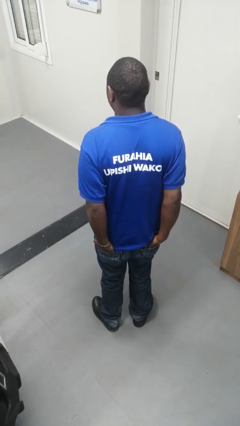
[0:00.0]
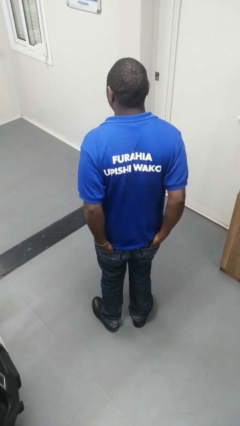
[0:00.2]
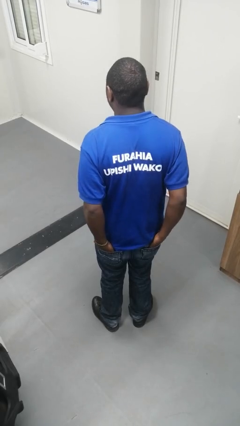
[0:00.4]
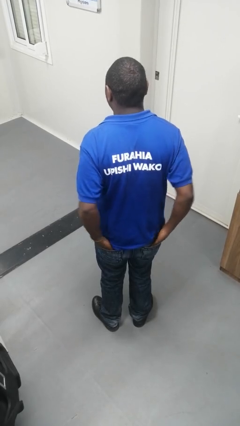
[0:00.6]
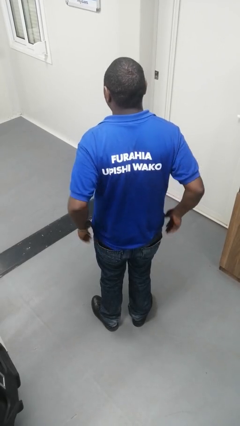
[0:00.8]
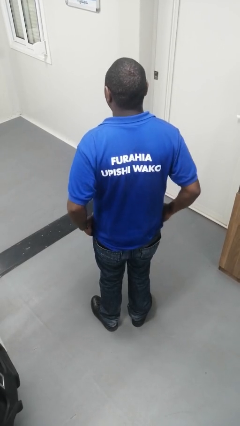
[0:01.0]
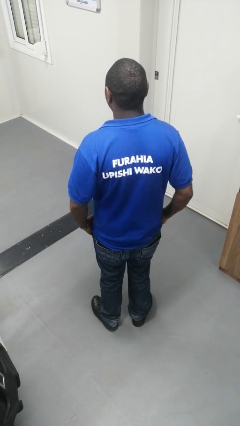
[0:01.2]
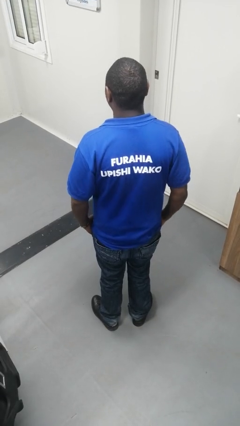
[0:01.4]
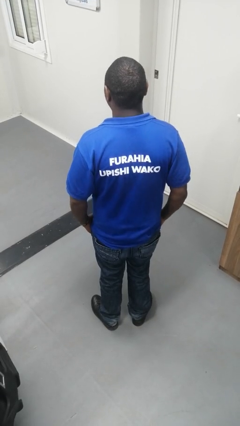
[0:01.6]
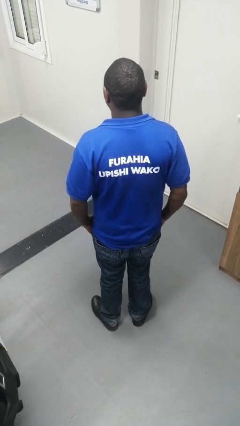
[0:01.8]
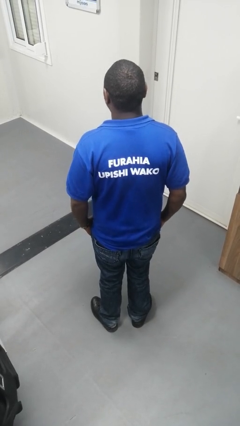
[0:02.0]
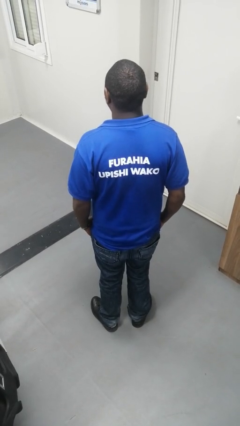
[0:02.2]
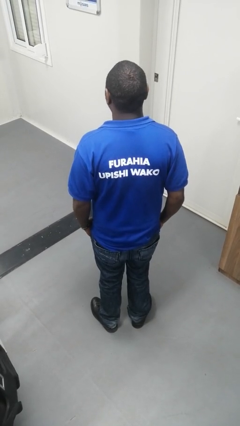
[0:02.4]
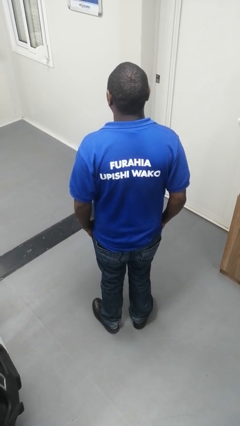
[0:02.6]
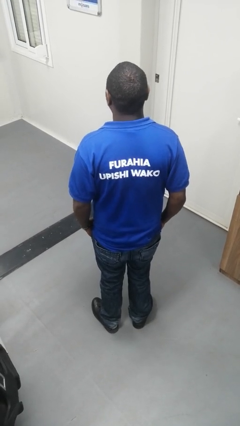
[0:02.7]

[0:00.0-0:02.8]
person puts hands in back pockets

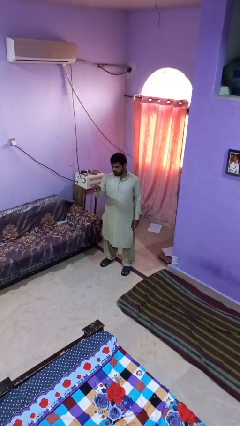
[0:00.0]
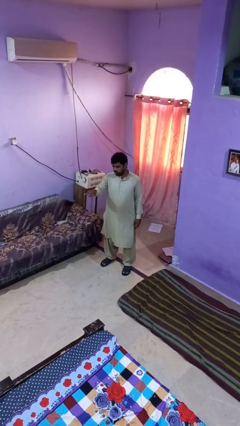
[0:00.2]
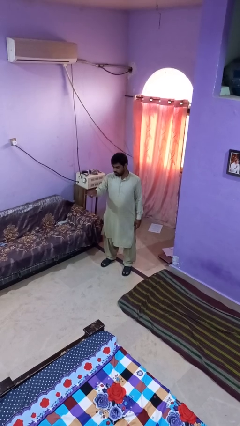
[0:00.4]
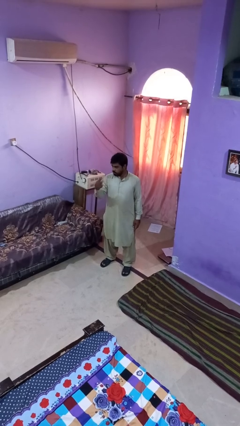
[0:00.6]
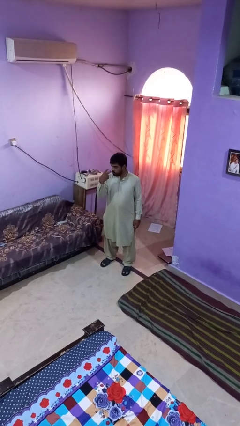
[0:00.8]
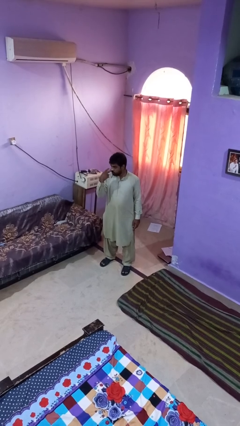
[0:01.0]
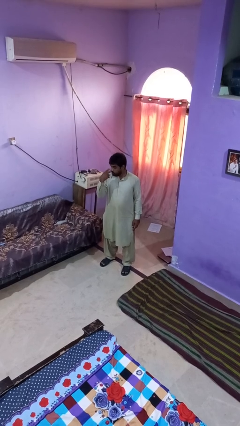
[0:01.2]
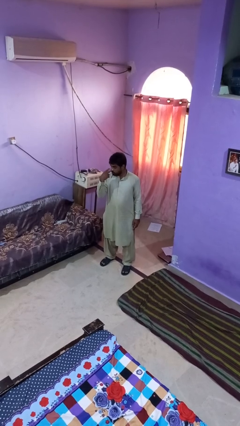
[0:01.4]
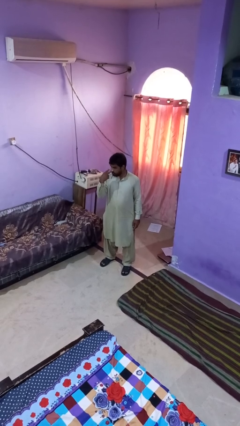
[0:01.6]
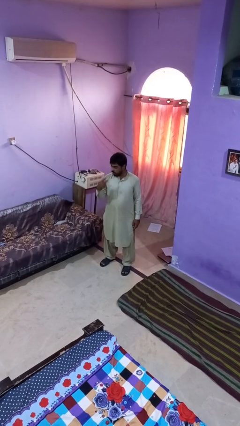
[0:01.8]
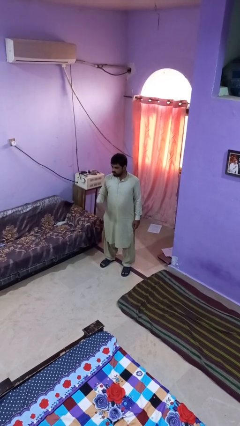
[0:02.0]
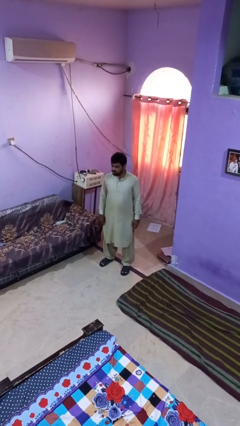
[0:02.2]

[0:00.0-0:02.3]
person gestures watch closely

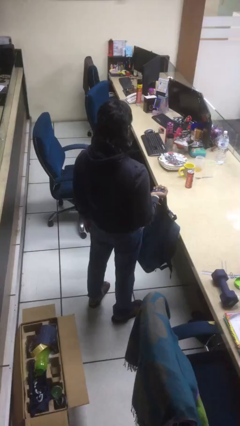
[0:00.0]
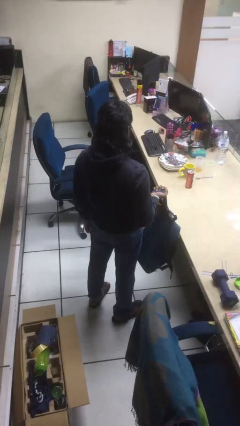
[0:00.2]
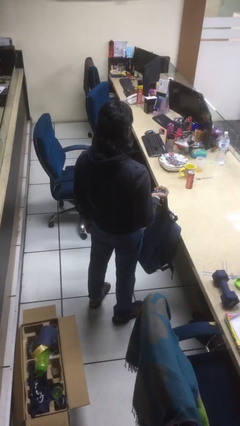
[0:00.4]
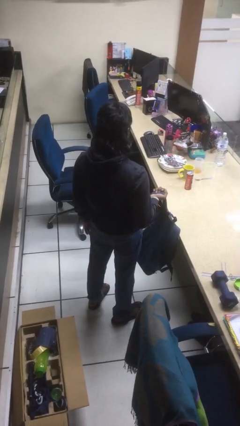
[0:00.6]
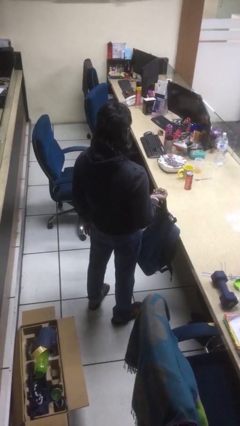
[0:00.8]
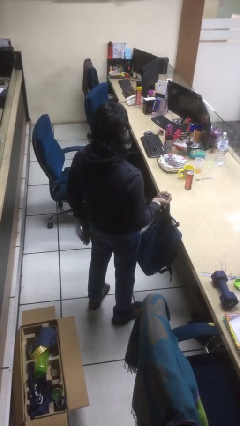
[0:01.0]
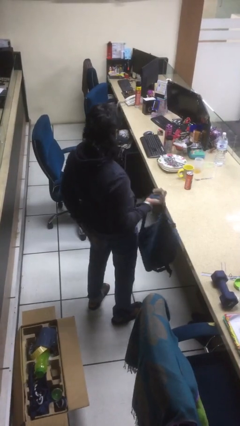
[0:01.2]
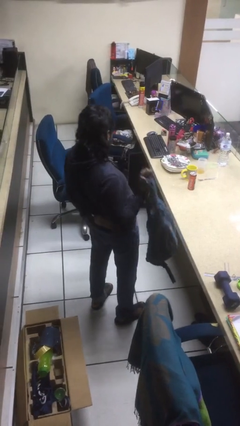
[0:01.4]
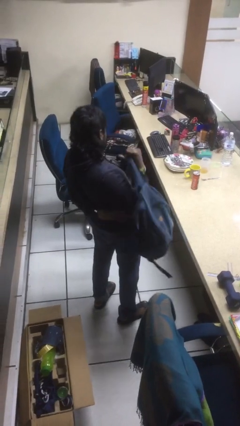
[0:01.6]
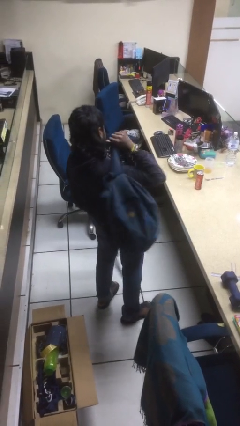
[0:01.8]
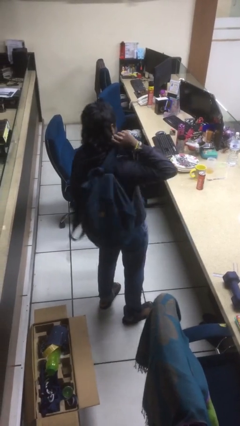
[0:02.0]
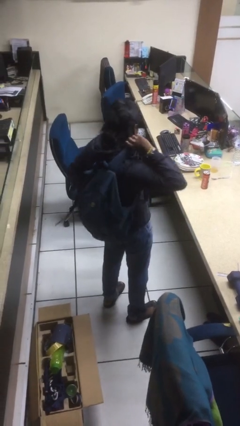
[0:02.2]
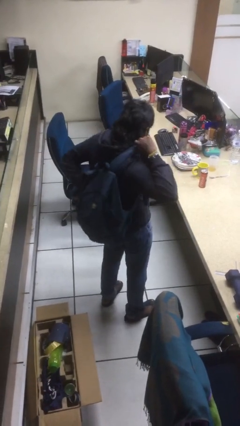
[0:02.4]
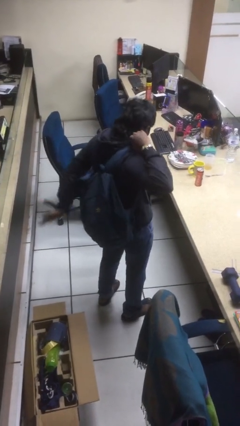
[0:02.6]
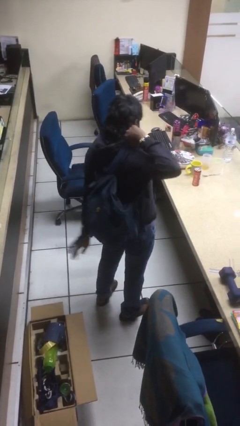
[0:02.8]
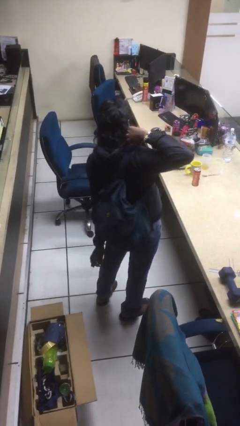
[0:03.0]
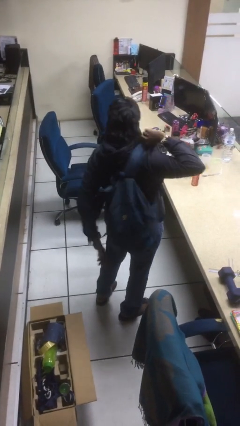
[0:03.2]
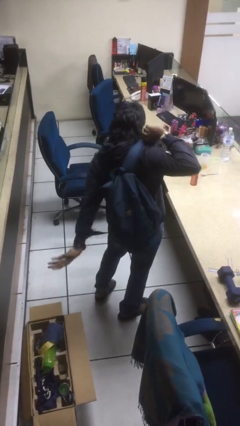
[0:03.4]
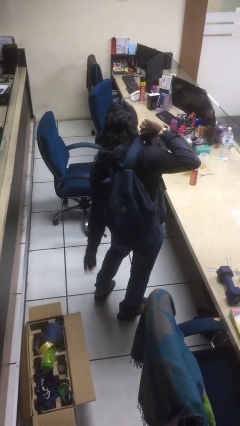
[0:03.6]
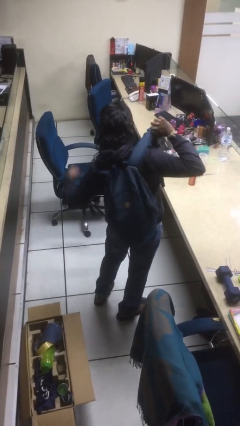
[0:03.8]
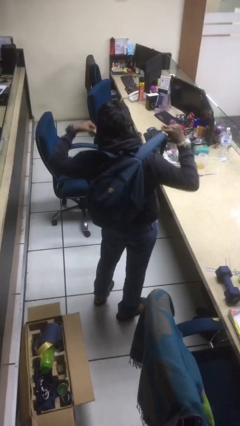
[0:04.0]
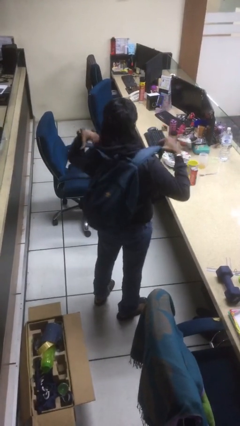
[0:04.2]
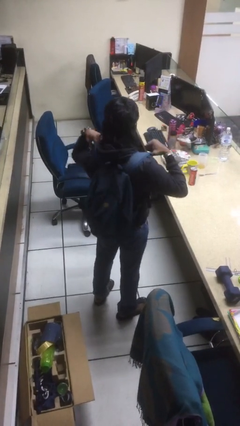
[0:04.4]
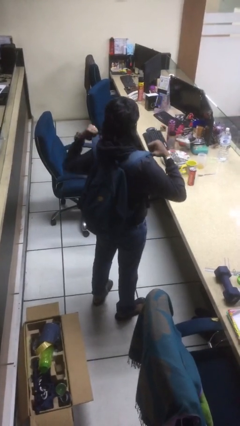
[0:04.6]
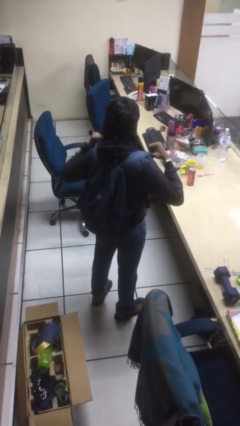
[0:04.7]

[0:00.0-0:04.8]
person puts on backpack

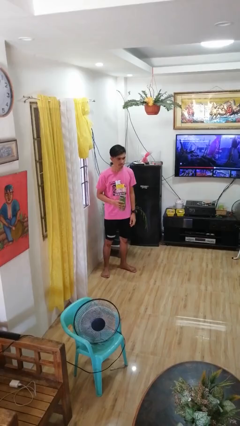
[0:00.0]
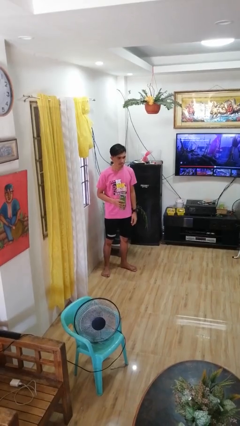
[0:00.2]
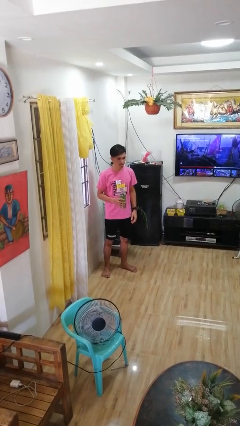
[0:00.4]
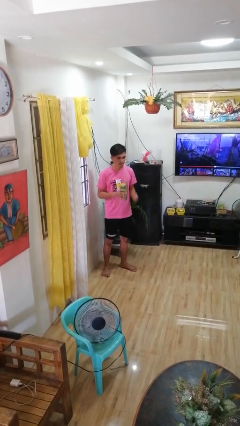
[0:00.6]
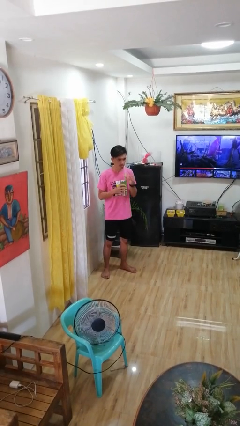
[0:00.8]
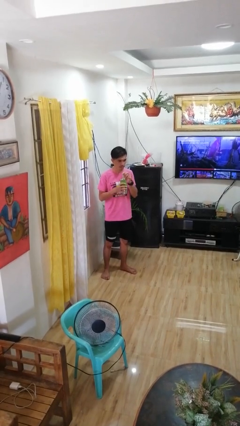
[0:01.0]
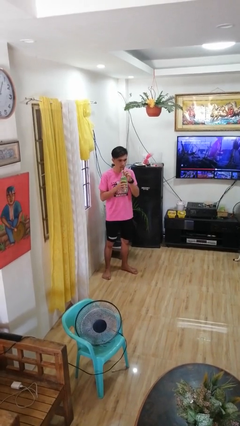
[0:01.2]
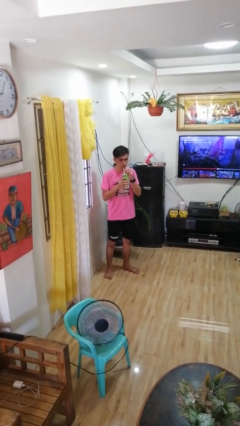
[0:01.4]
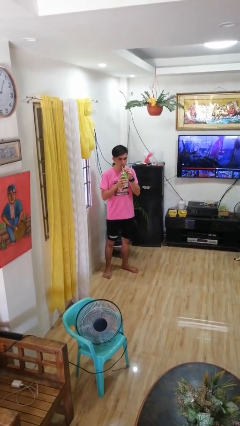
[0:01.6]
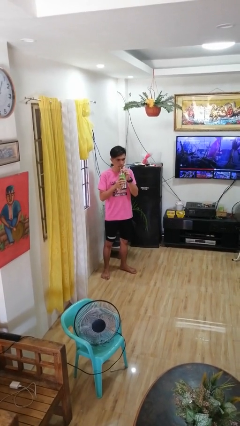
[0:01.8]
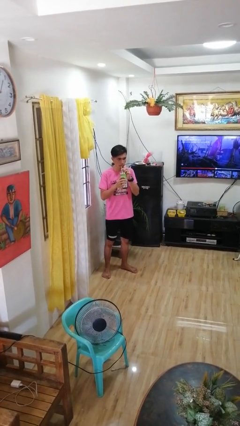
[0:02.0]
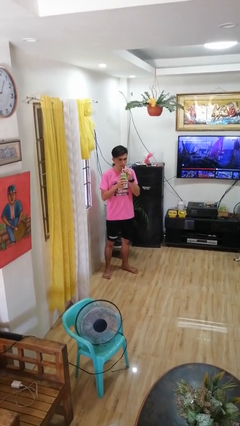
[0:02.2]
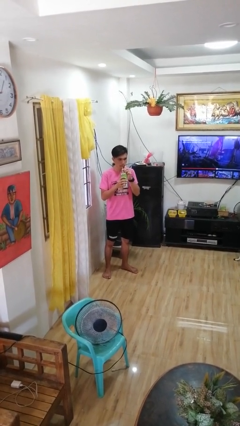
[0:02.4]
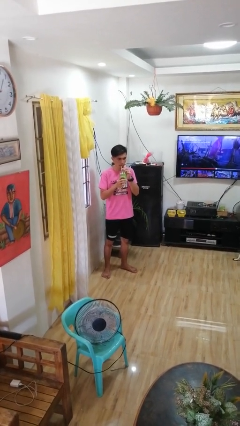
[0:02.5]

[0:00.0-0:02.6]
person drinks from straw

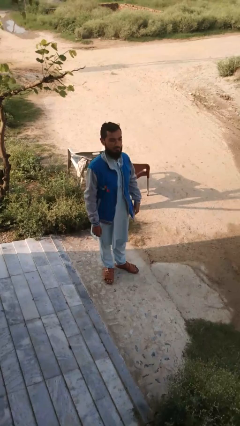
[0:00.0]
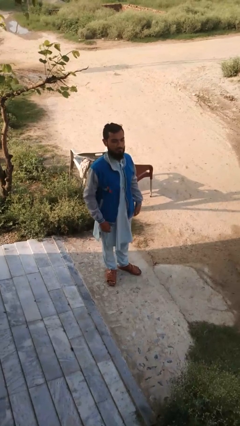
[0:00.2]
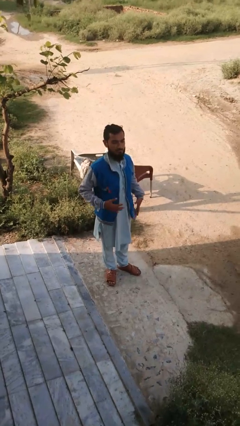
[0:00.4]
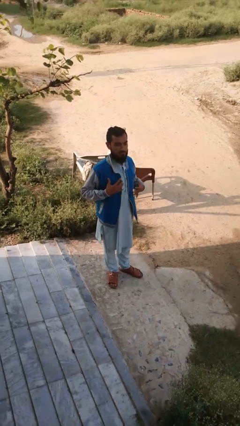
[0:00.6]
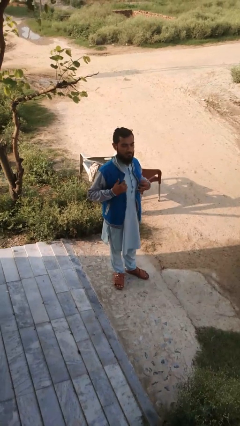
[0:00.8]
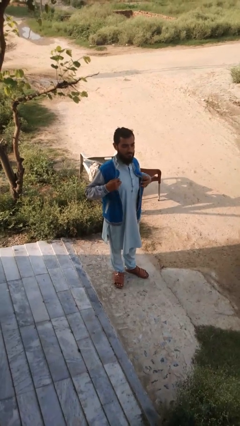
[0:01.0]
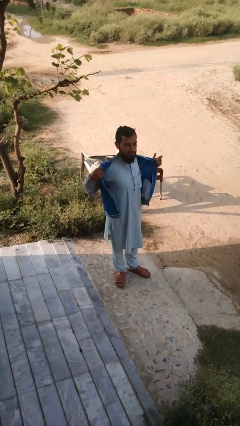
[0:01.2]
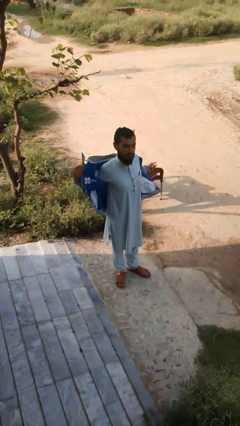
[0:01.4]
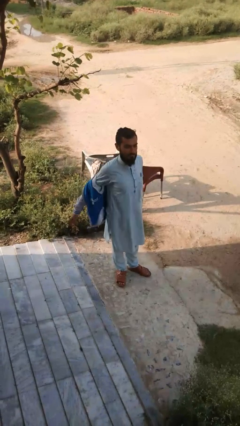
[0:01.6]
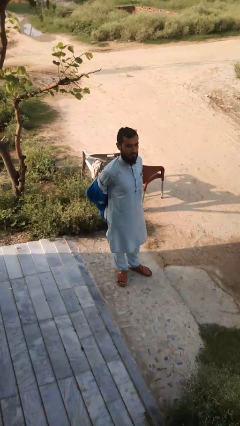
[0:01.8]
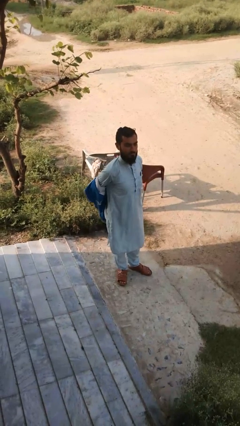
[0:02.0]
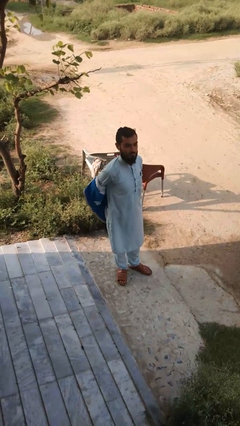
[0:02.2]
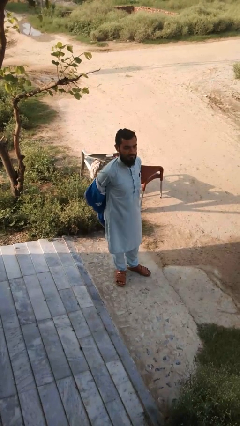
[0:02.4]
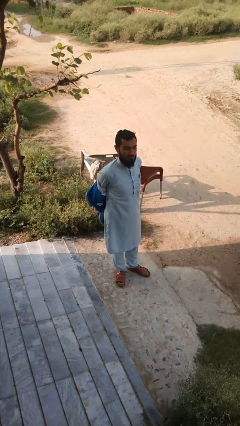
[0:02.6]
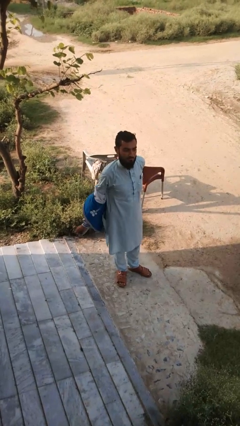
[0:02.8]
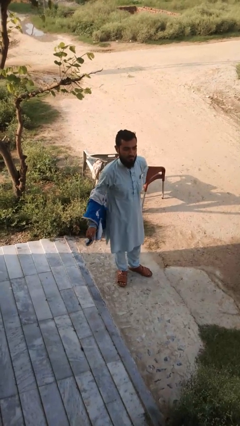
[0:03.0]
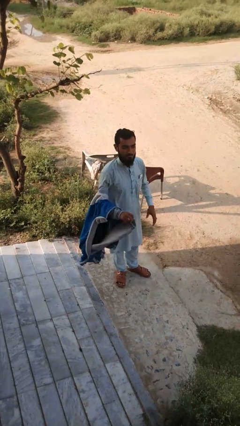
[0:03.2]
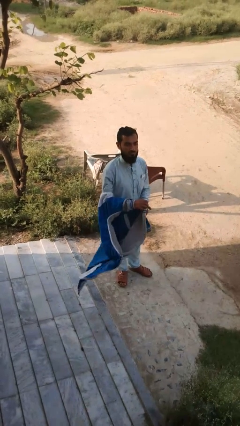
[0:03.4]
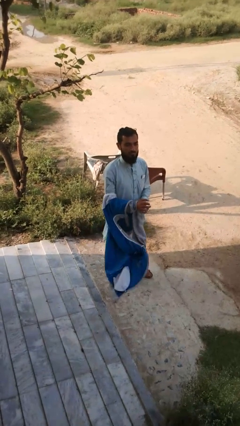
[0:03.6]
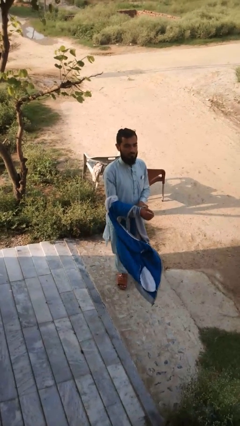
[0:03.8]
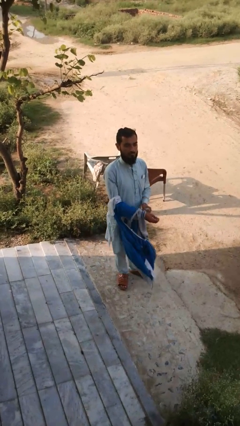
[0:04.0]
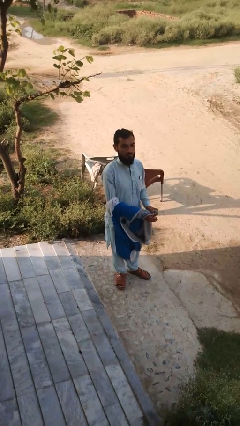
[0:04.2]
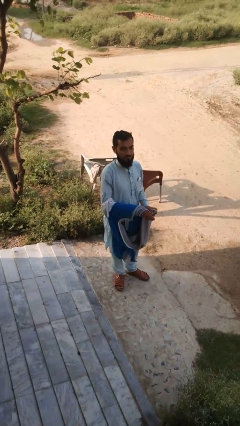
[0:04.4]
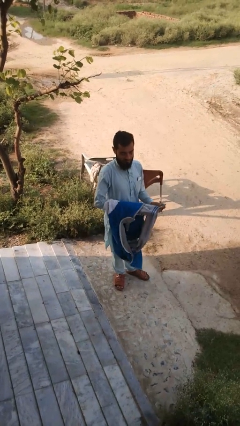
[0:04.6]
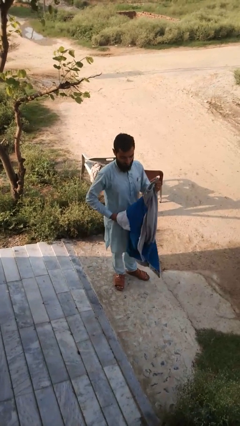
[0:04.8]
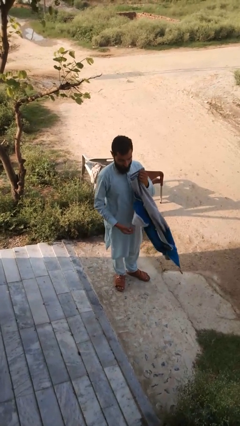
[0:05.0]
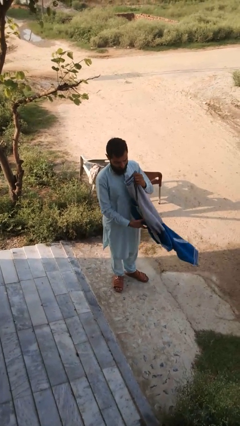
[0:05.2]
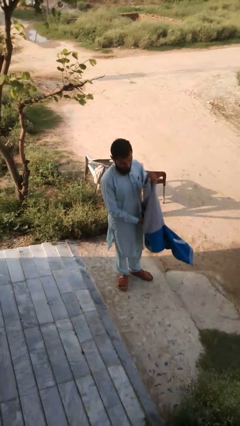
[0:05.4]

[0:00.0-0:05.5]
person takes off jacket
